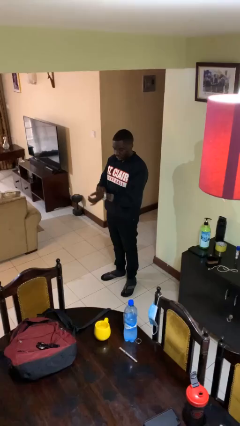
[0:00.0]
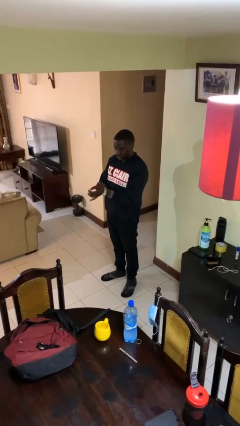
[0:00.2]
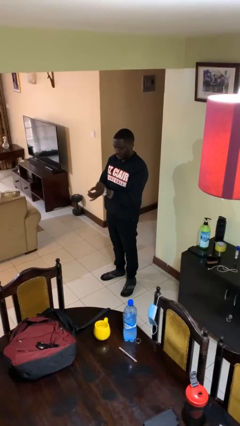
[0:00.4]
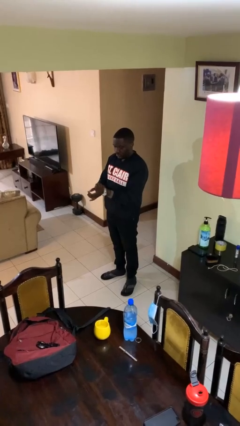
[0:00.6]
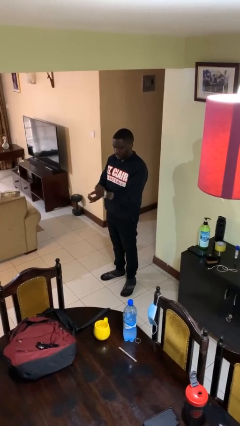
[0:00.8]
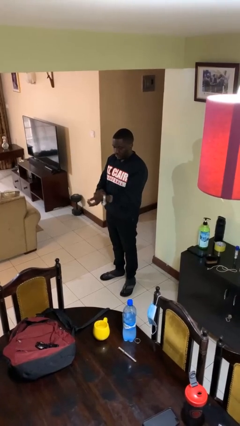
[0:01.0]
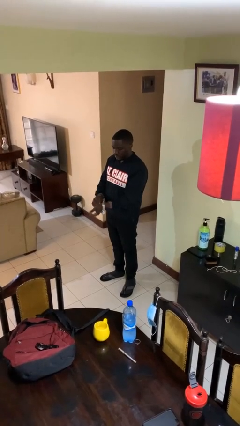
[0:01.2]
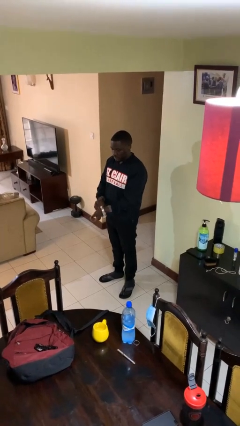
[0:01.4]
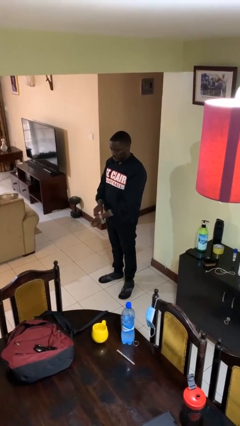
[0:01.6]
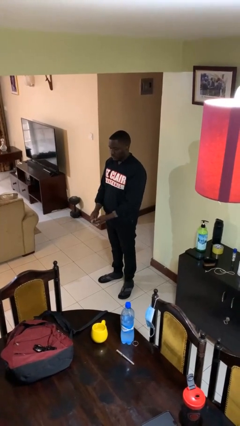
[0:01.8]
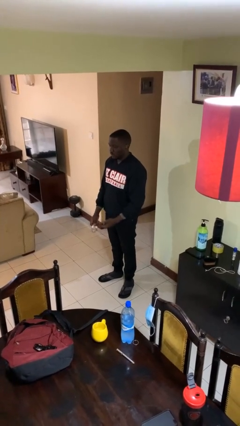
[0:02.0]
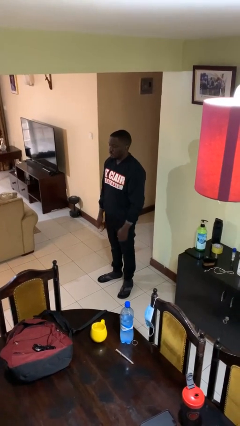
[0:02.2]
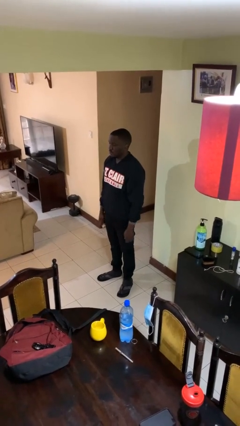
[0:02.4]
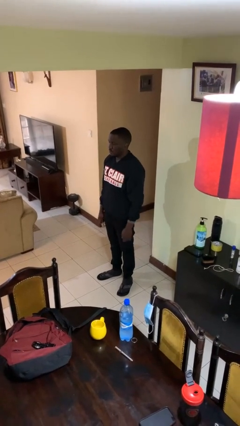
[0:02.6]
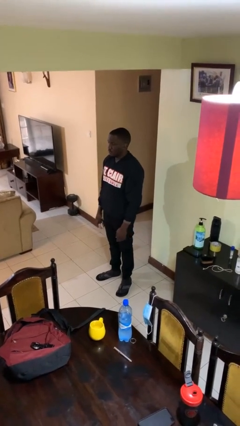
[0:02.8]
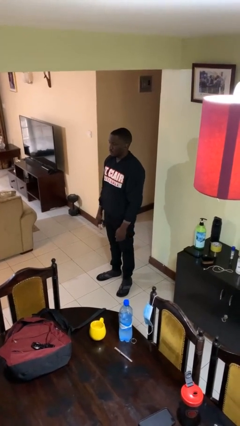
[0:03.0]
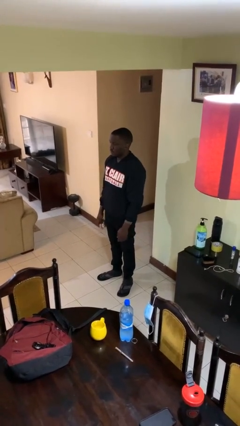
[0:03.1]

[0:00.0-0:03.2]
person takes off wristwatch

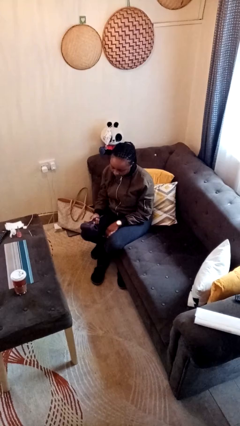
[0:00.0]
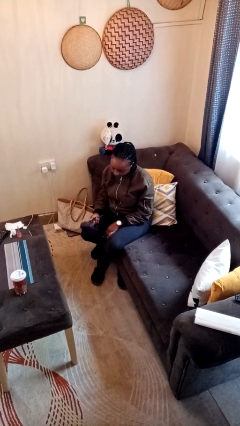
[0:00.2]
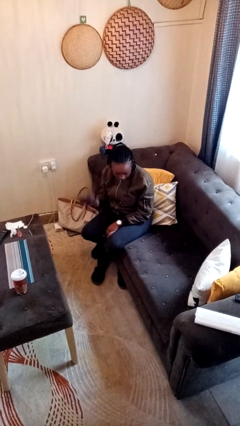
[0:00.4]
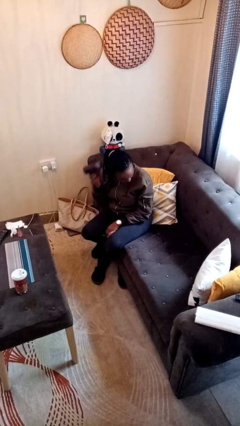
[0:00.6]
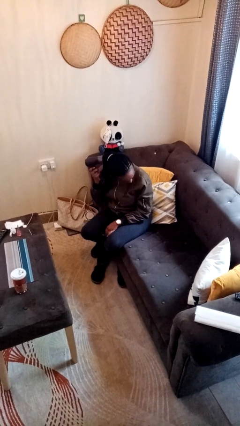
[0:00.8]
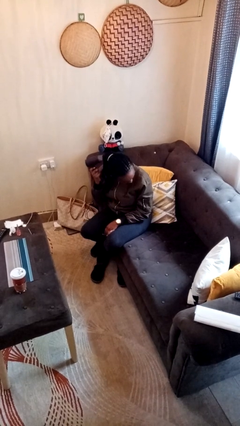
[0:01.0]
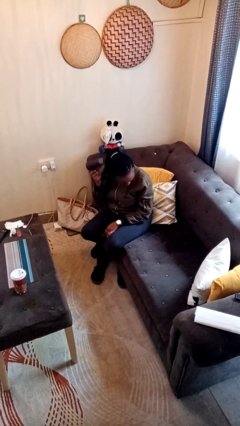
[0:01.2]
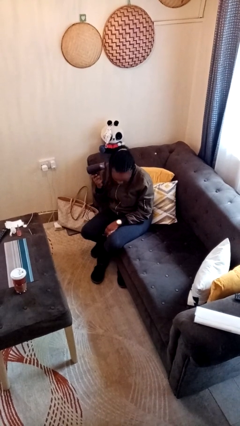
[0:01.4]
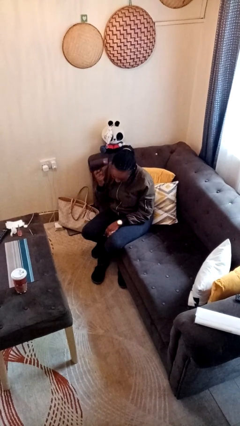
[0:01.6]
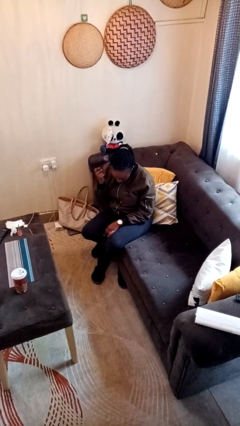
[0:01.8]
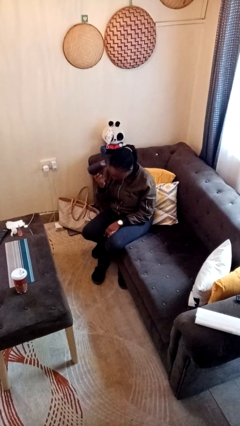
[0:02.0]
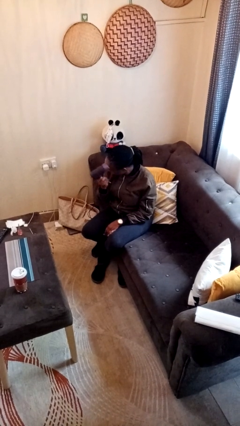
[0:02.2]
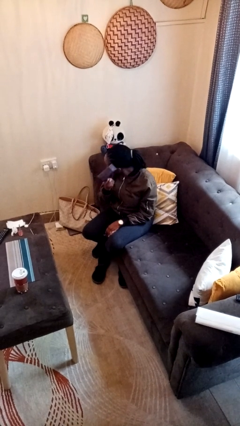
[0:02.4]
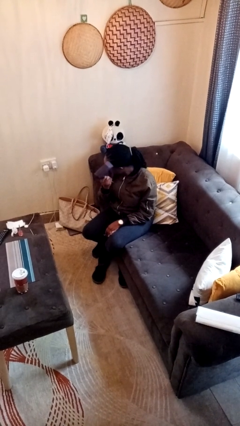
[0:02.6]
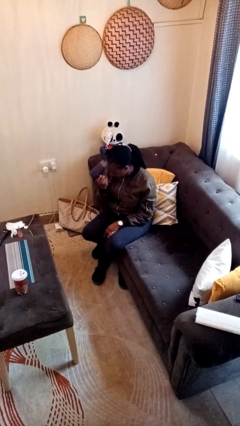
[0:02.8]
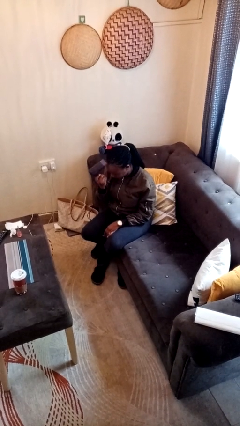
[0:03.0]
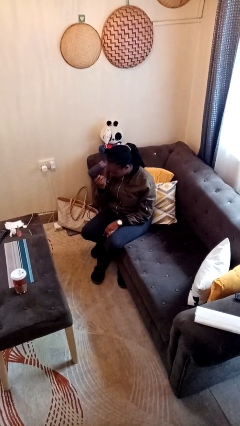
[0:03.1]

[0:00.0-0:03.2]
person dries hair with hairdryer

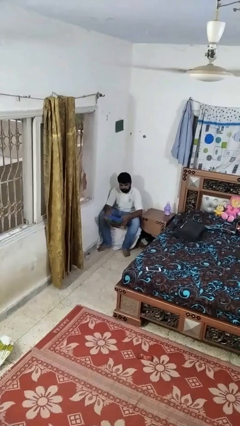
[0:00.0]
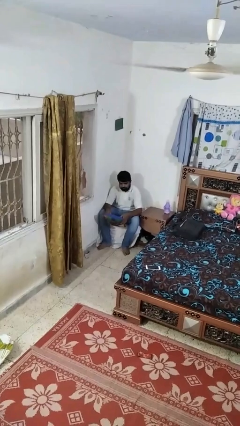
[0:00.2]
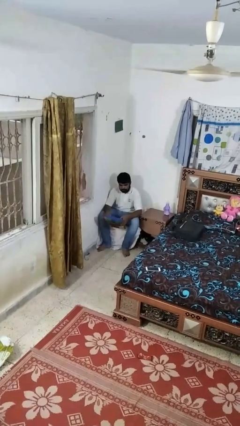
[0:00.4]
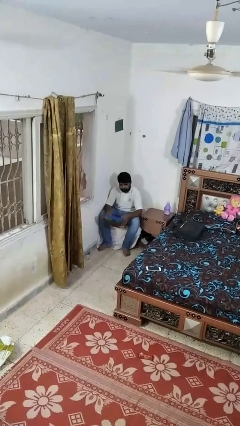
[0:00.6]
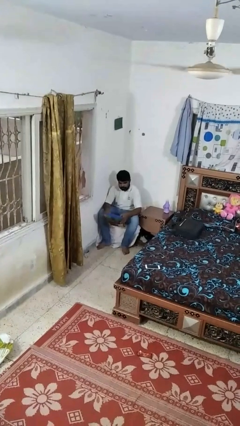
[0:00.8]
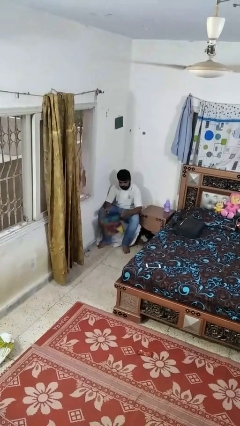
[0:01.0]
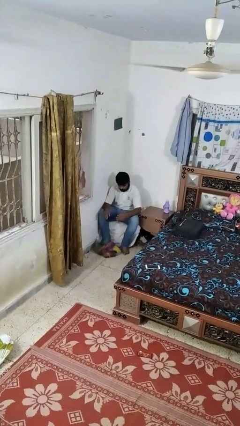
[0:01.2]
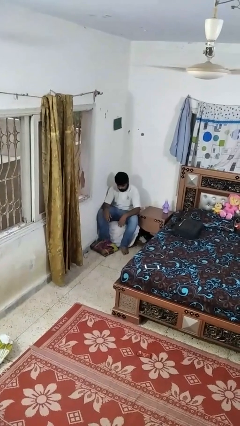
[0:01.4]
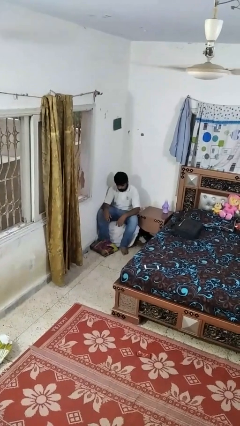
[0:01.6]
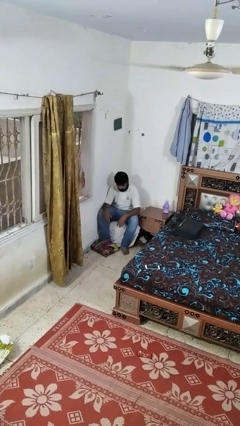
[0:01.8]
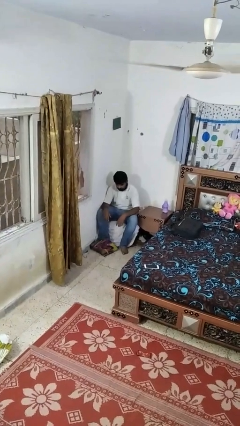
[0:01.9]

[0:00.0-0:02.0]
person drops object

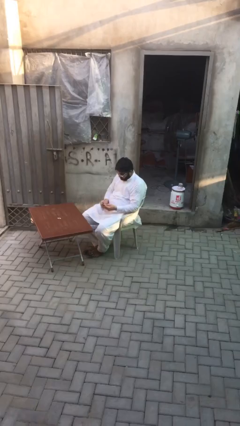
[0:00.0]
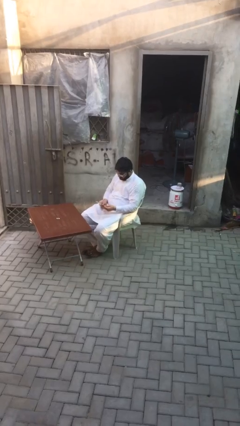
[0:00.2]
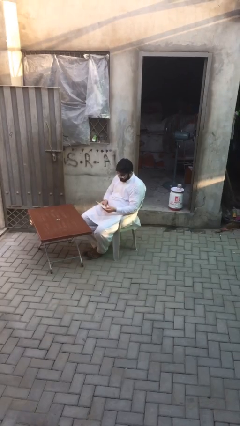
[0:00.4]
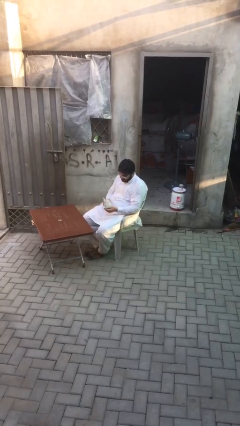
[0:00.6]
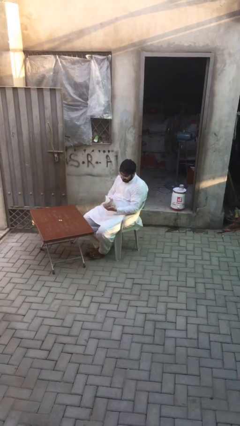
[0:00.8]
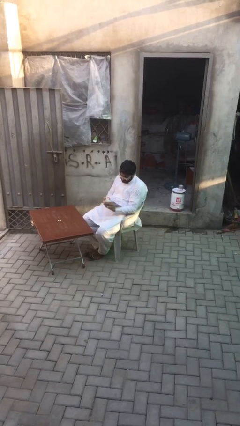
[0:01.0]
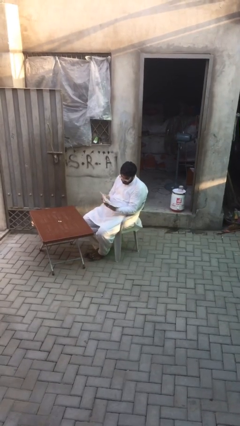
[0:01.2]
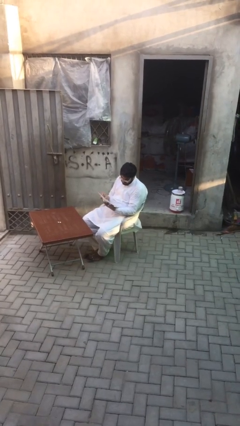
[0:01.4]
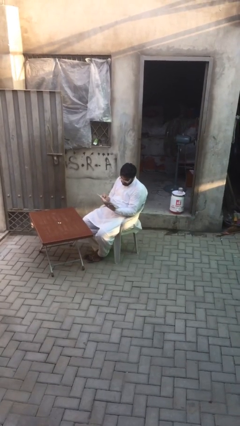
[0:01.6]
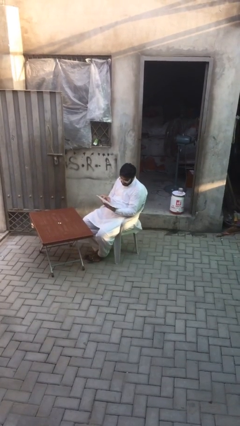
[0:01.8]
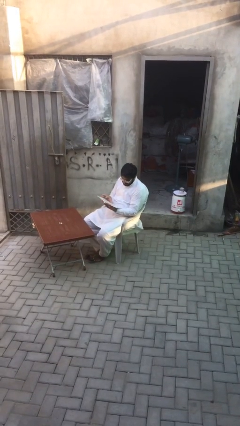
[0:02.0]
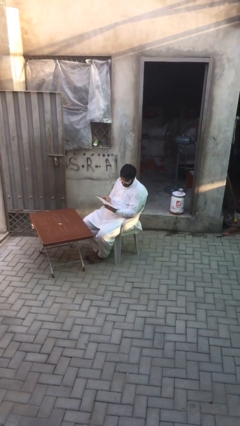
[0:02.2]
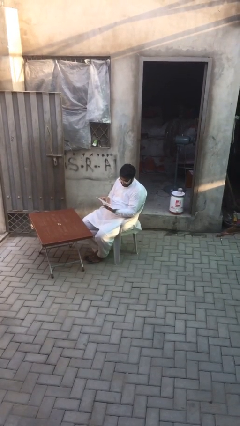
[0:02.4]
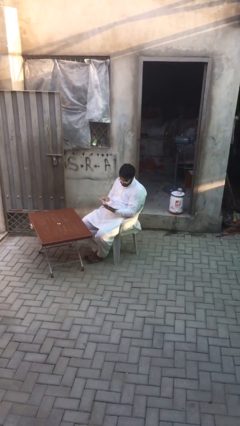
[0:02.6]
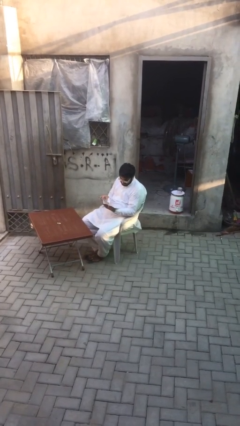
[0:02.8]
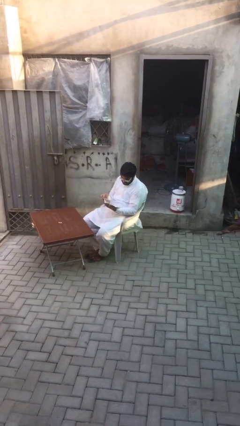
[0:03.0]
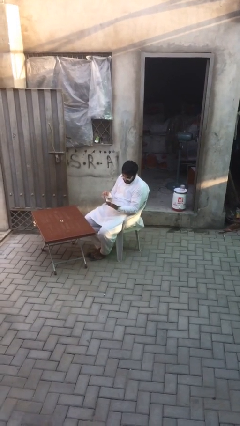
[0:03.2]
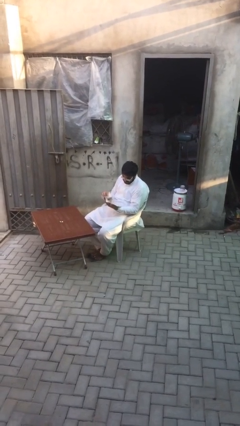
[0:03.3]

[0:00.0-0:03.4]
person reads document

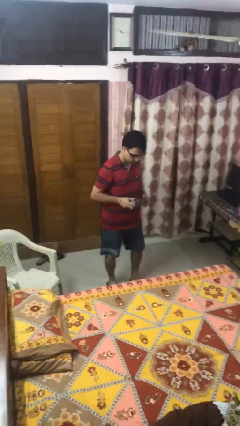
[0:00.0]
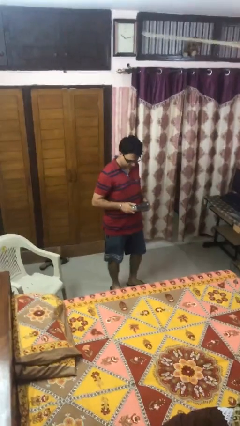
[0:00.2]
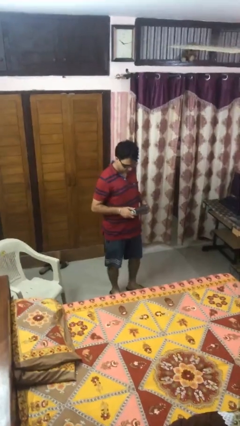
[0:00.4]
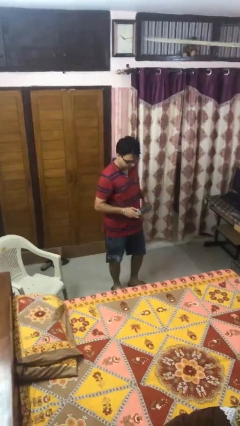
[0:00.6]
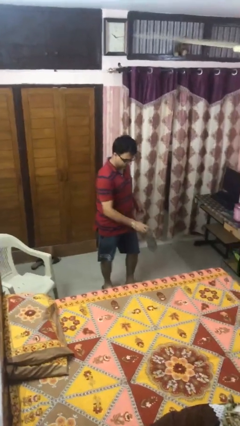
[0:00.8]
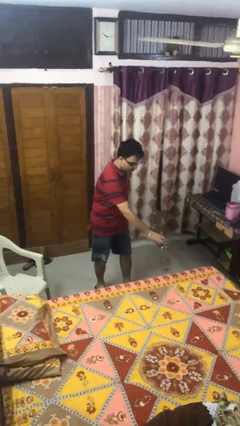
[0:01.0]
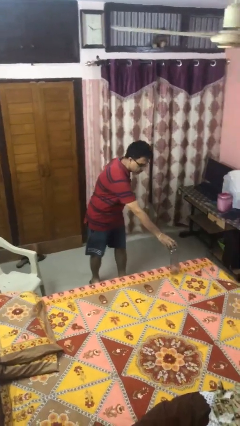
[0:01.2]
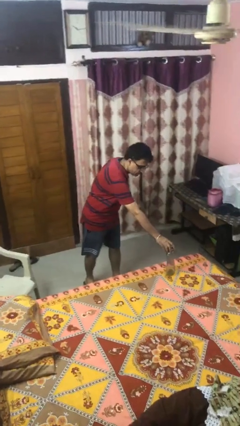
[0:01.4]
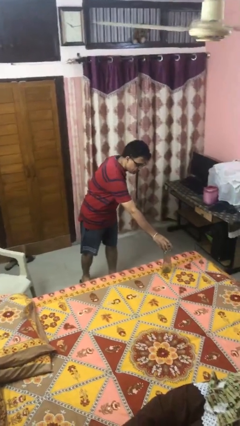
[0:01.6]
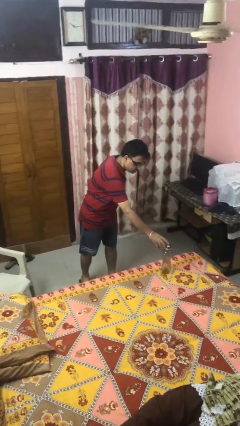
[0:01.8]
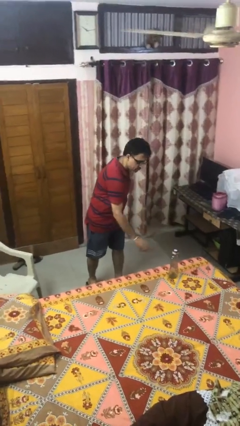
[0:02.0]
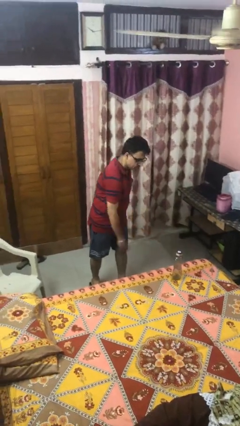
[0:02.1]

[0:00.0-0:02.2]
person puts down object on bed

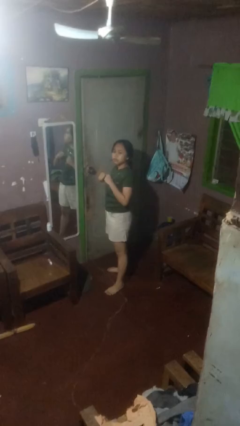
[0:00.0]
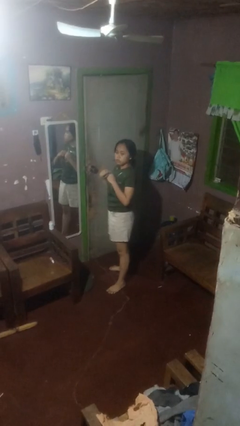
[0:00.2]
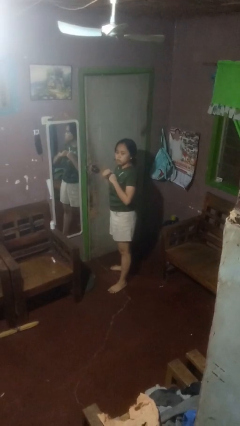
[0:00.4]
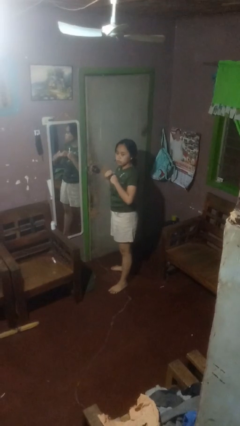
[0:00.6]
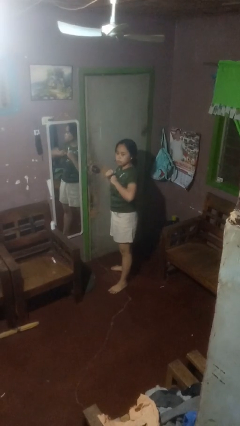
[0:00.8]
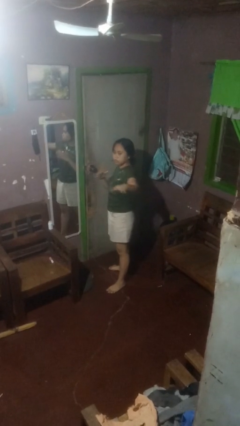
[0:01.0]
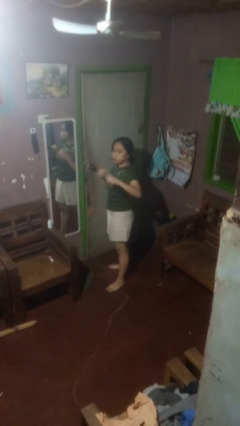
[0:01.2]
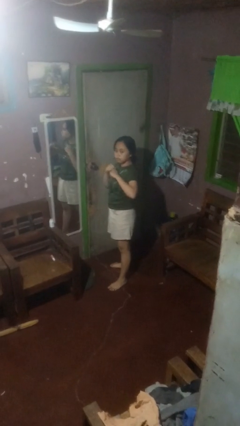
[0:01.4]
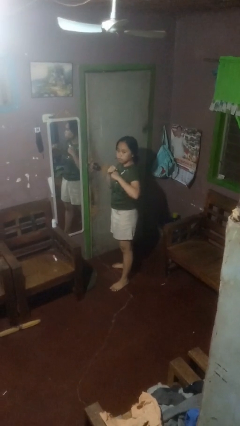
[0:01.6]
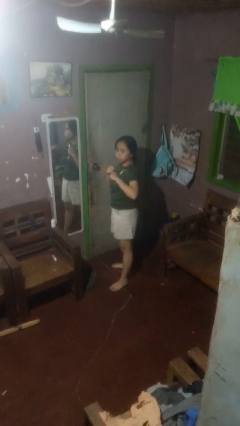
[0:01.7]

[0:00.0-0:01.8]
person karate chop

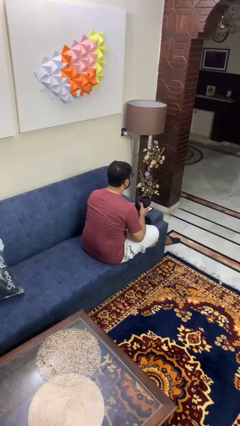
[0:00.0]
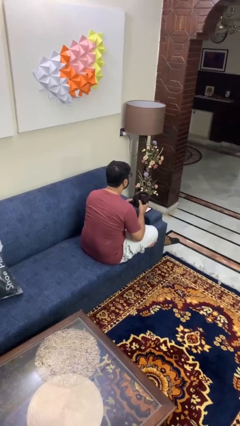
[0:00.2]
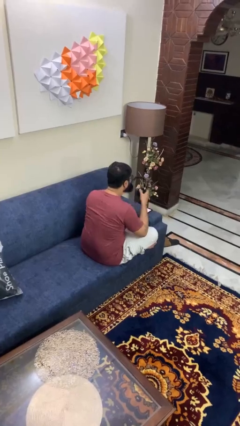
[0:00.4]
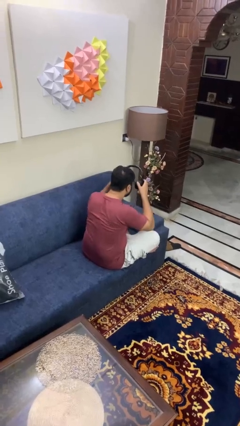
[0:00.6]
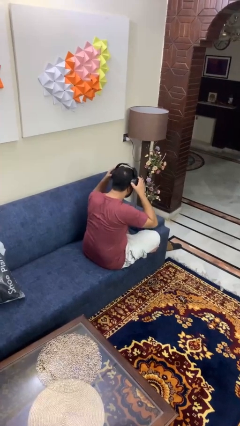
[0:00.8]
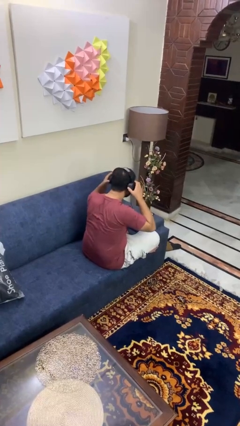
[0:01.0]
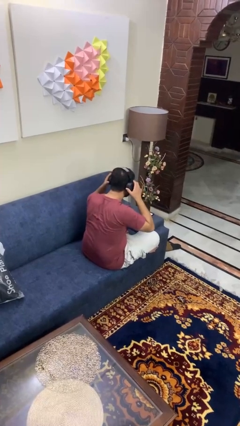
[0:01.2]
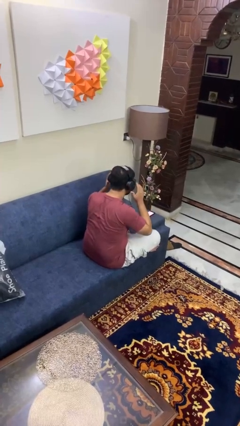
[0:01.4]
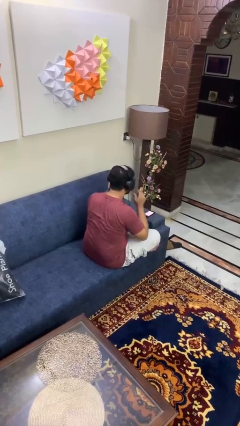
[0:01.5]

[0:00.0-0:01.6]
person puts on headphones
